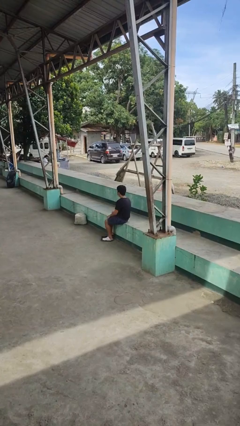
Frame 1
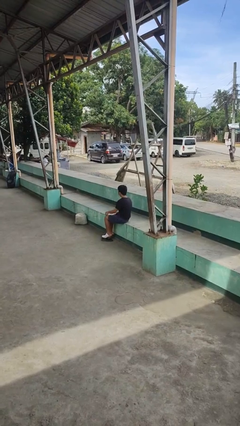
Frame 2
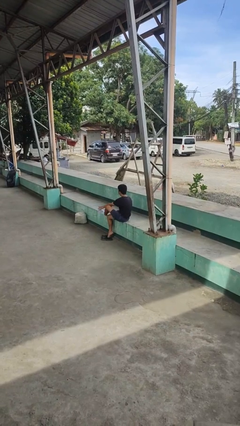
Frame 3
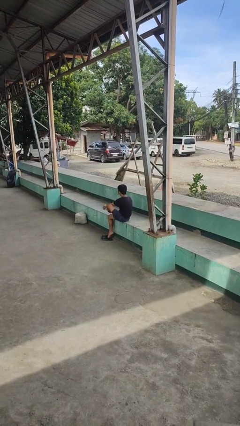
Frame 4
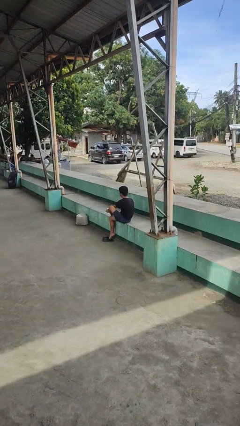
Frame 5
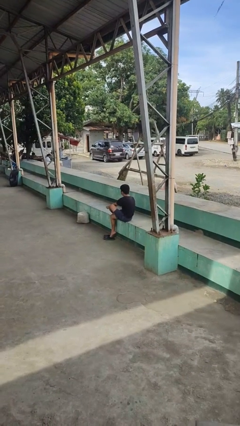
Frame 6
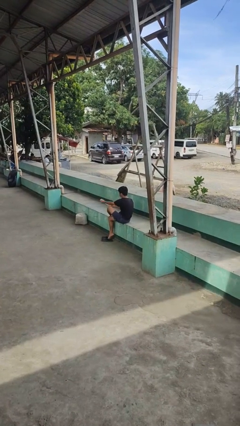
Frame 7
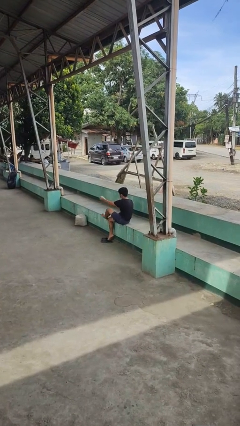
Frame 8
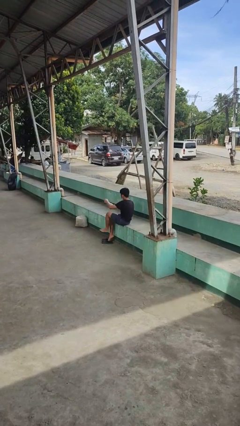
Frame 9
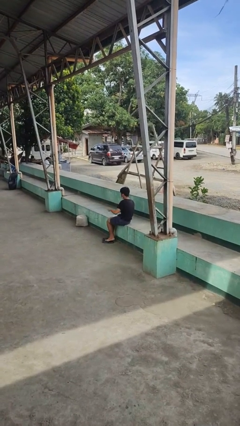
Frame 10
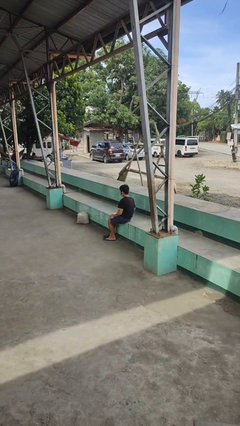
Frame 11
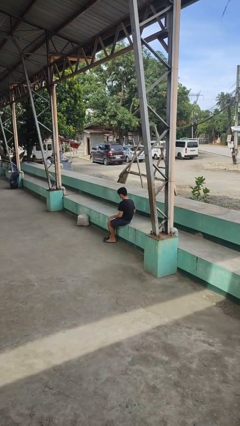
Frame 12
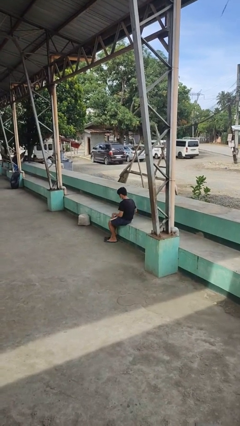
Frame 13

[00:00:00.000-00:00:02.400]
person takes off socks

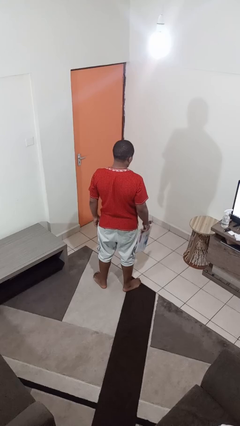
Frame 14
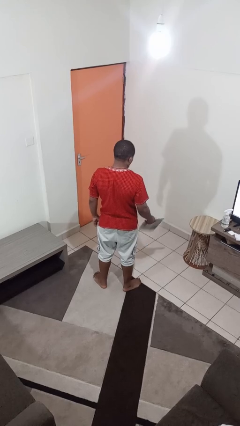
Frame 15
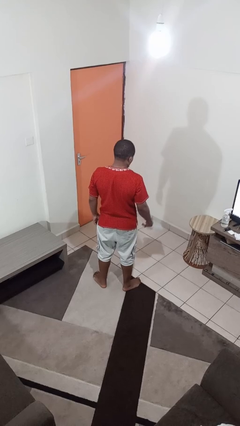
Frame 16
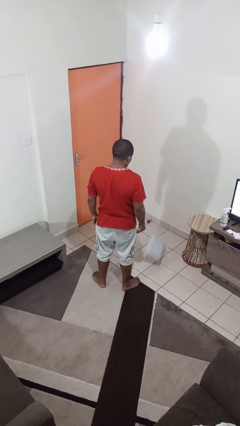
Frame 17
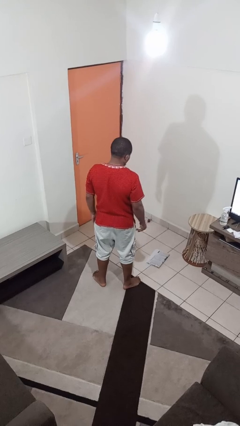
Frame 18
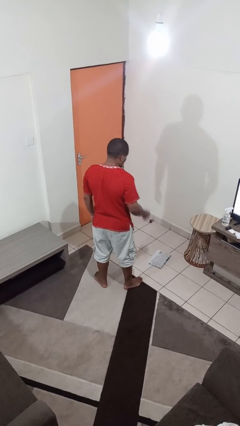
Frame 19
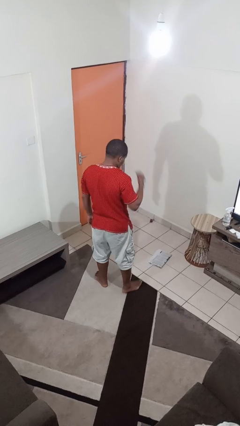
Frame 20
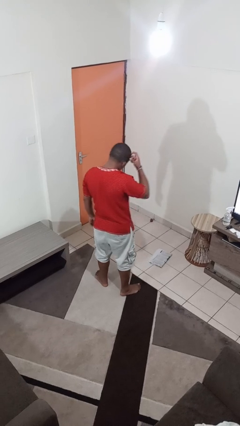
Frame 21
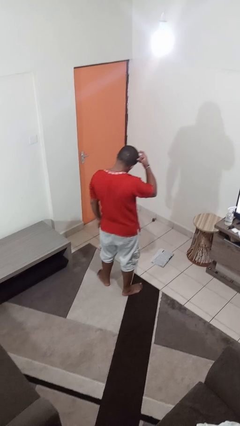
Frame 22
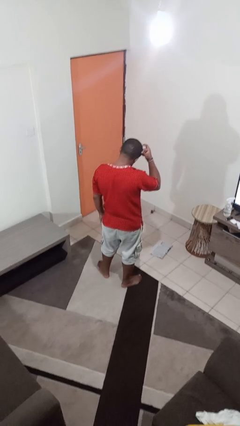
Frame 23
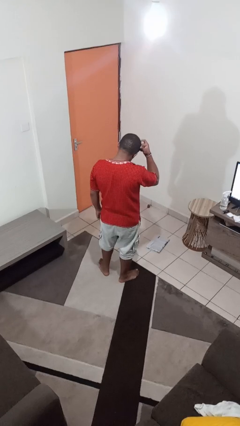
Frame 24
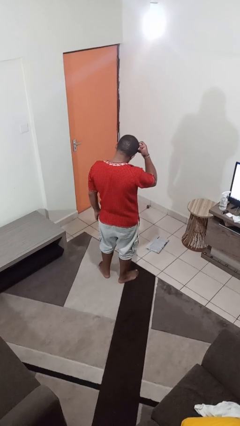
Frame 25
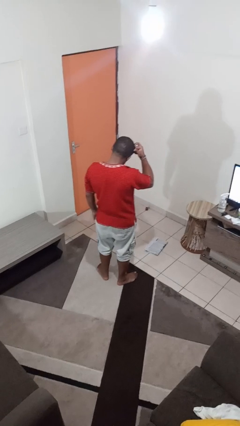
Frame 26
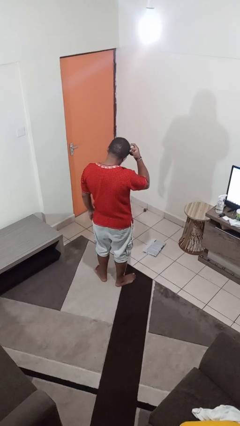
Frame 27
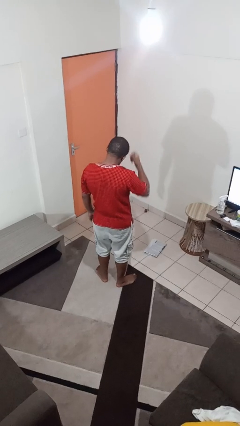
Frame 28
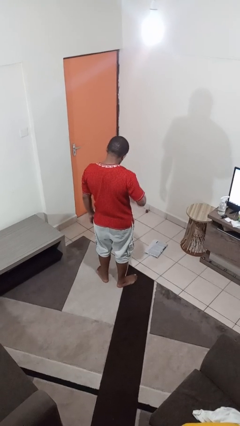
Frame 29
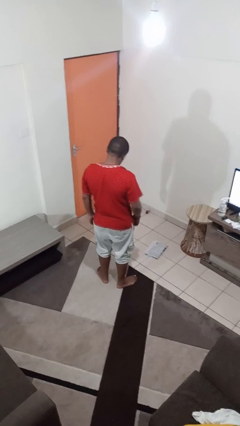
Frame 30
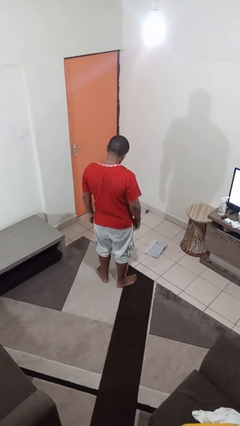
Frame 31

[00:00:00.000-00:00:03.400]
person throws object to ground

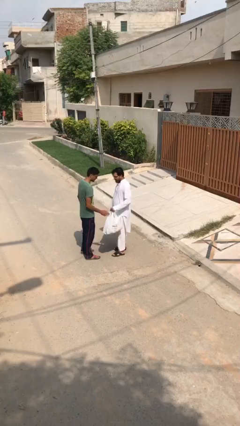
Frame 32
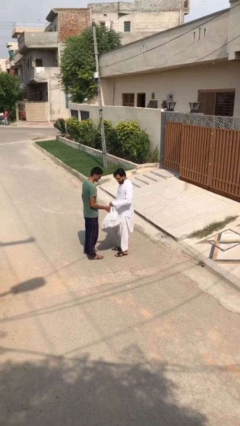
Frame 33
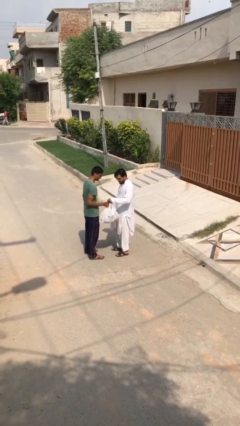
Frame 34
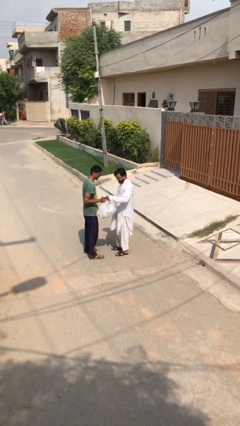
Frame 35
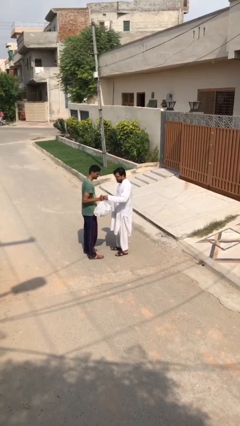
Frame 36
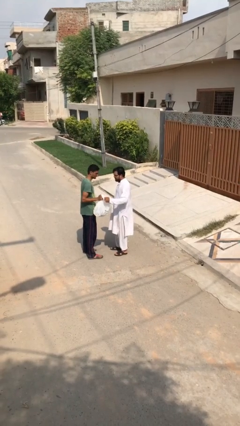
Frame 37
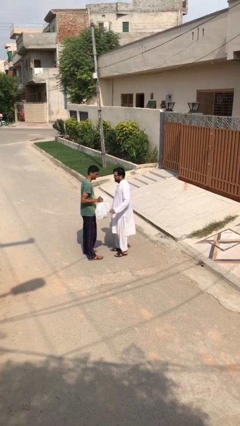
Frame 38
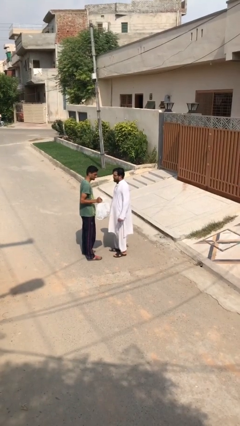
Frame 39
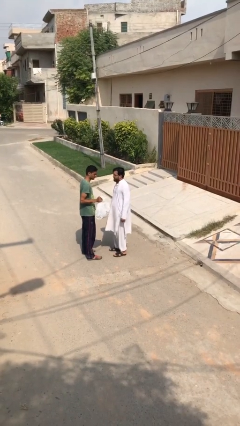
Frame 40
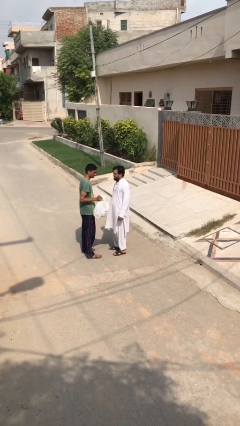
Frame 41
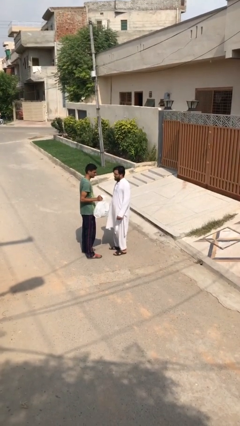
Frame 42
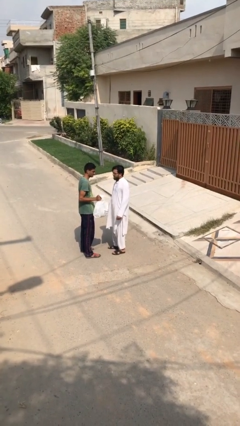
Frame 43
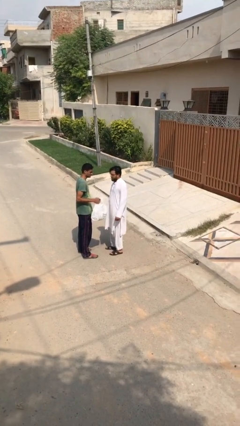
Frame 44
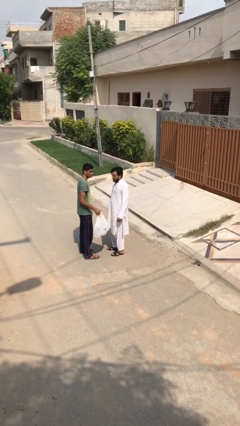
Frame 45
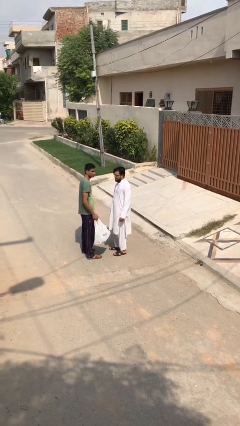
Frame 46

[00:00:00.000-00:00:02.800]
person transfers object to person

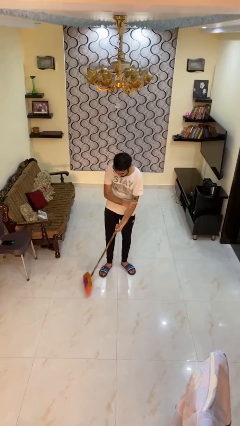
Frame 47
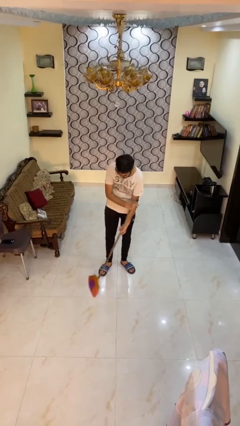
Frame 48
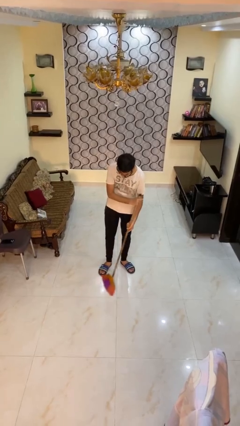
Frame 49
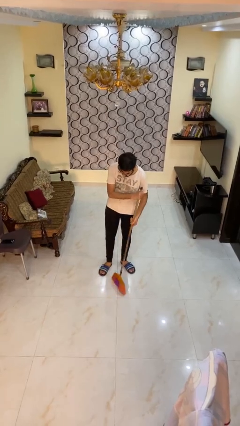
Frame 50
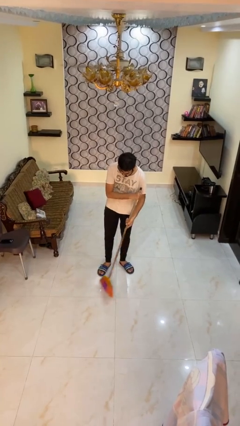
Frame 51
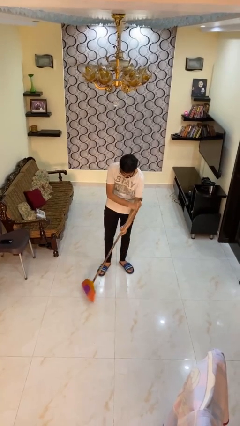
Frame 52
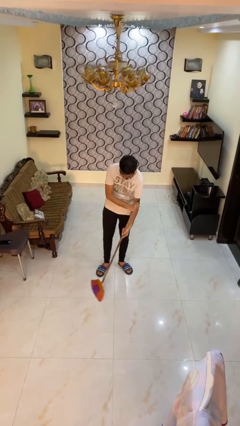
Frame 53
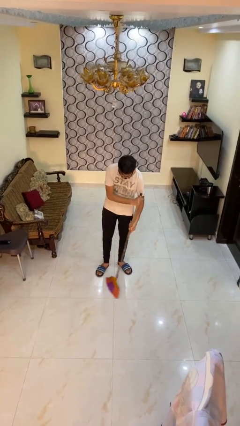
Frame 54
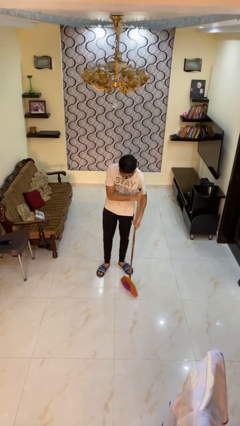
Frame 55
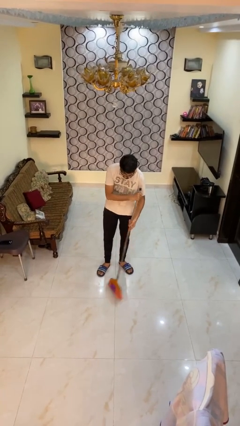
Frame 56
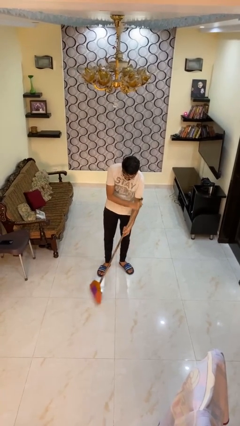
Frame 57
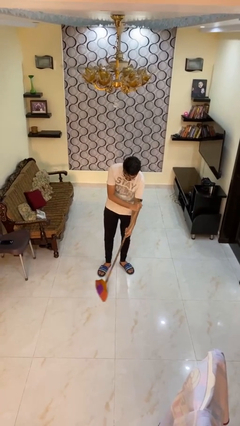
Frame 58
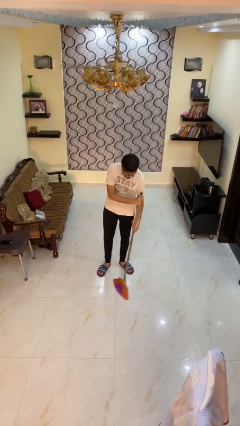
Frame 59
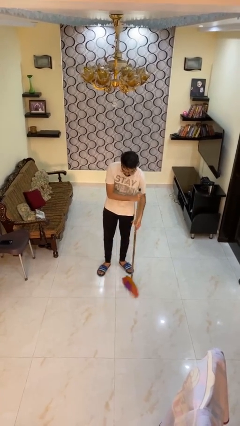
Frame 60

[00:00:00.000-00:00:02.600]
person mops

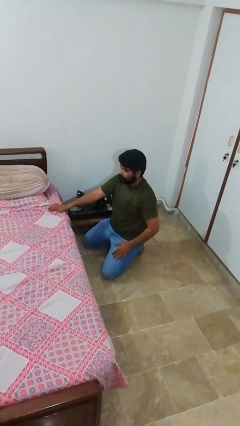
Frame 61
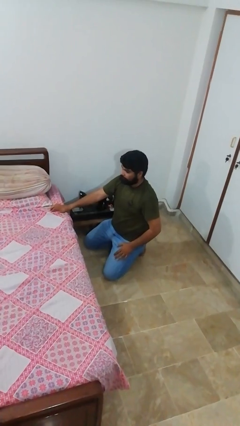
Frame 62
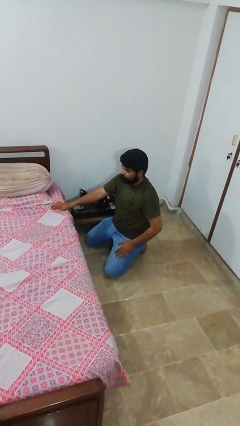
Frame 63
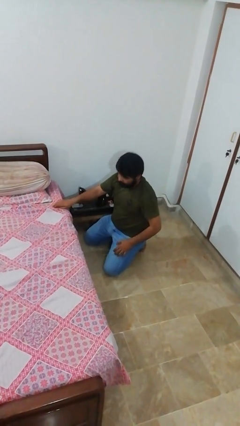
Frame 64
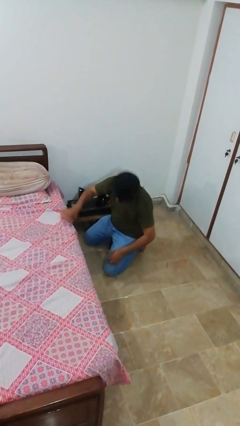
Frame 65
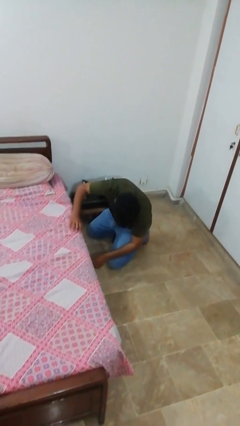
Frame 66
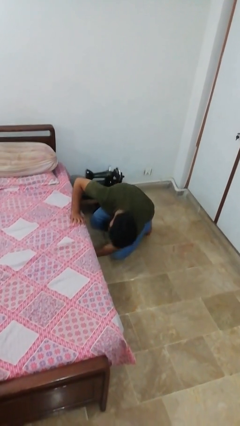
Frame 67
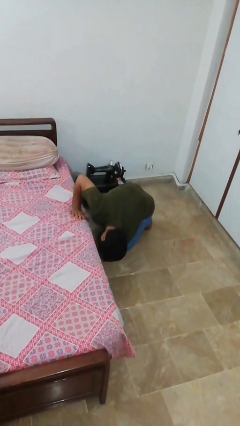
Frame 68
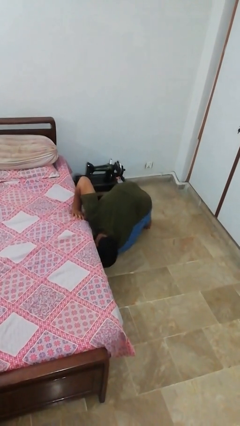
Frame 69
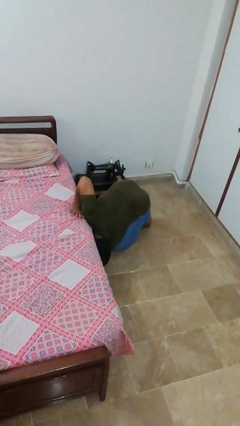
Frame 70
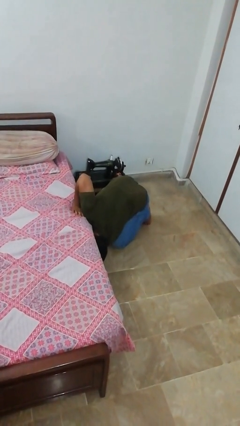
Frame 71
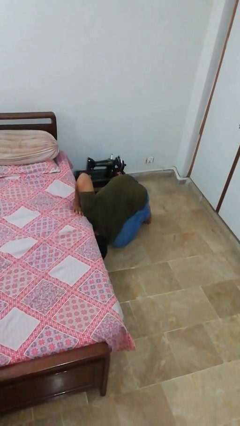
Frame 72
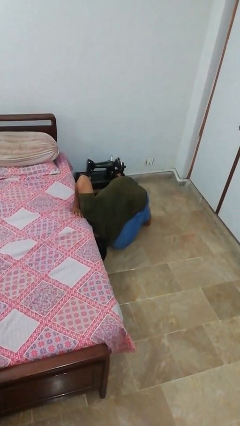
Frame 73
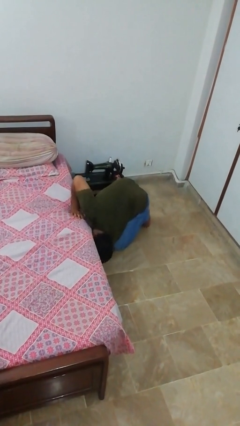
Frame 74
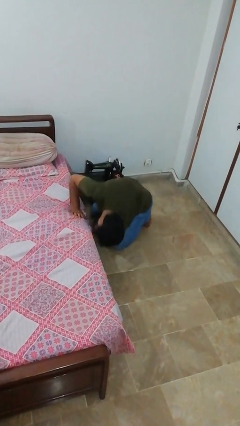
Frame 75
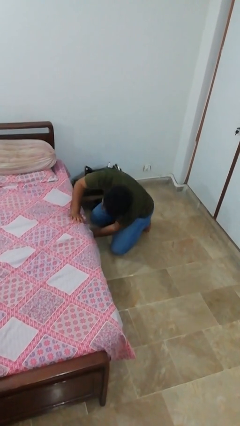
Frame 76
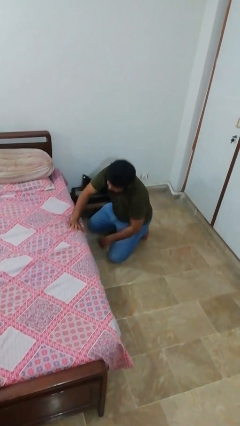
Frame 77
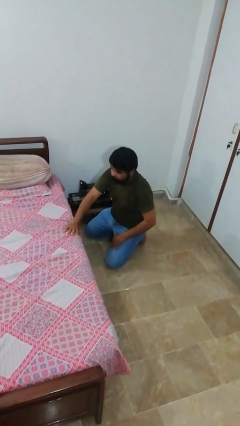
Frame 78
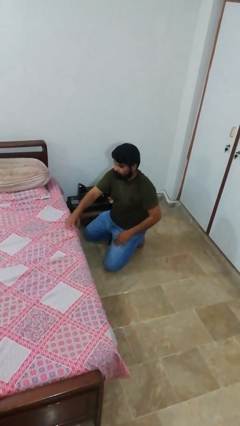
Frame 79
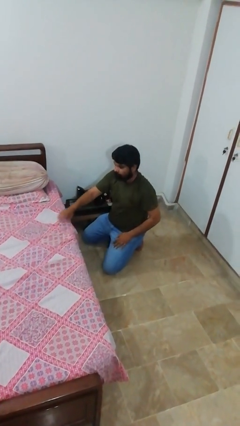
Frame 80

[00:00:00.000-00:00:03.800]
person searches under bed

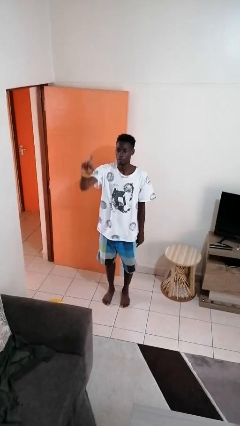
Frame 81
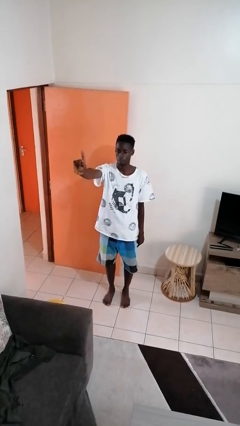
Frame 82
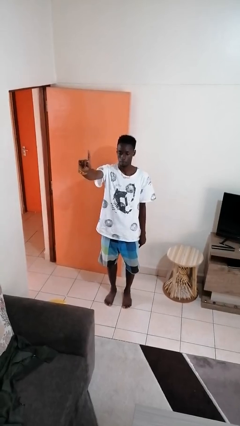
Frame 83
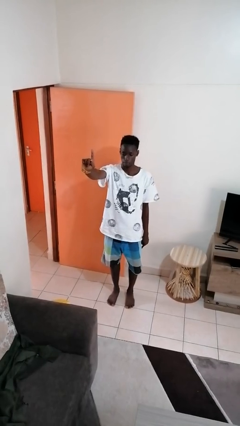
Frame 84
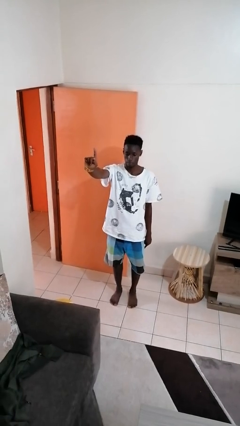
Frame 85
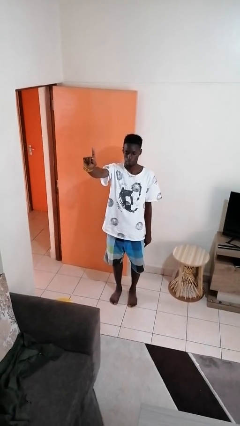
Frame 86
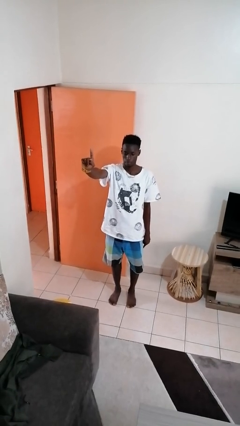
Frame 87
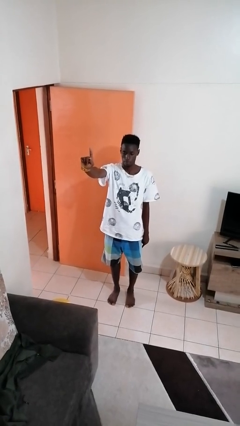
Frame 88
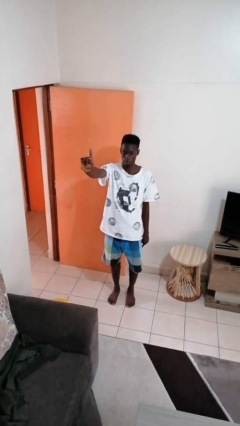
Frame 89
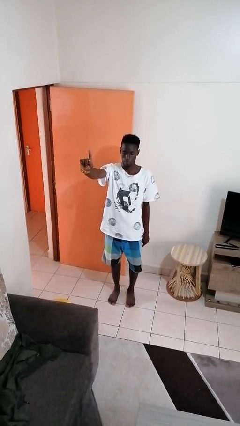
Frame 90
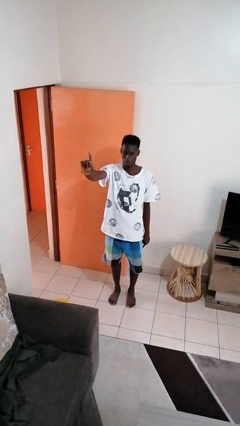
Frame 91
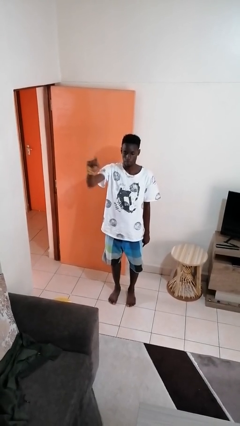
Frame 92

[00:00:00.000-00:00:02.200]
person gestures number one
